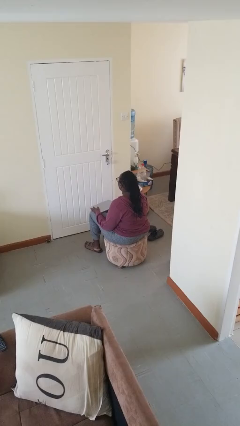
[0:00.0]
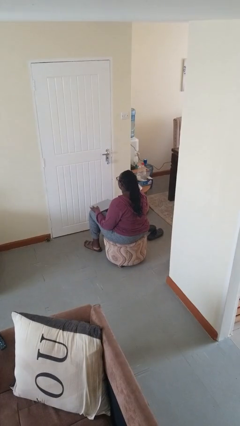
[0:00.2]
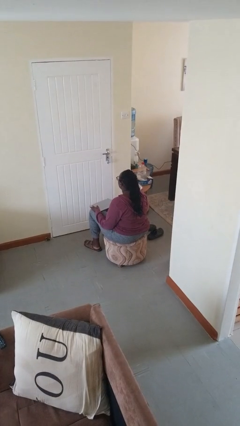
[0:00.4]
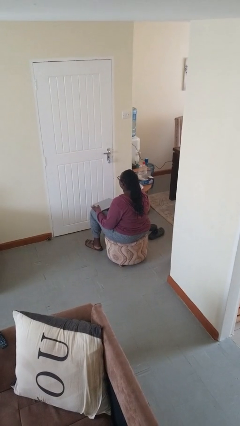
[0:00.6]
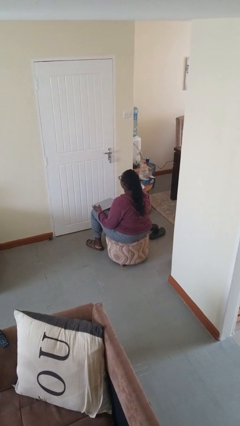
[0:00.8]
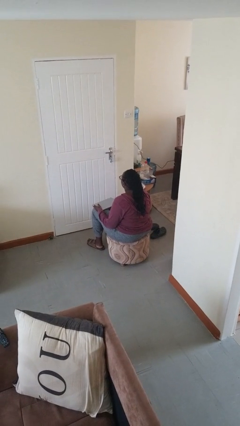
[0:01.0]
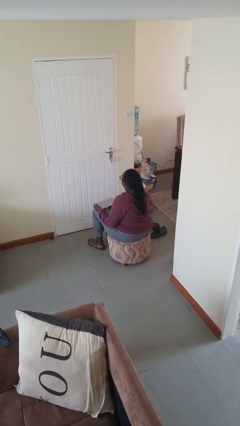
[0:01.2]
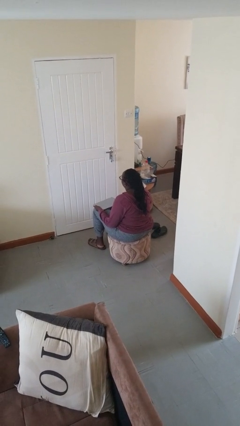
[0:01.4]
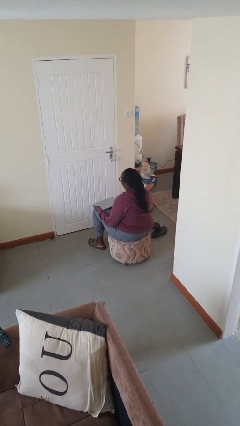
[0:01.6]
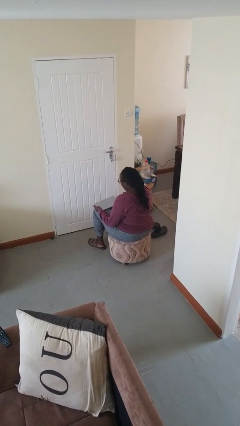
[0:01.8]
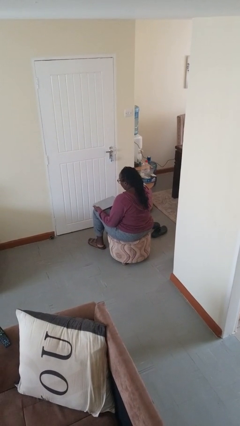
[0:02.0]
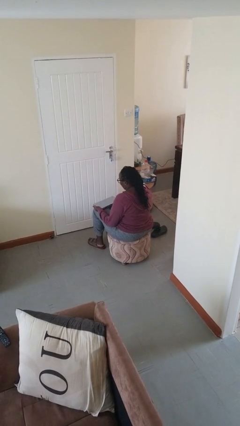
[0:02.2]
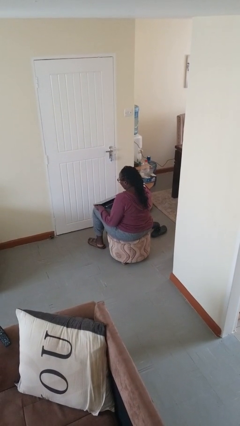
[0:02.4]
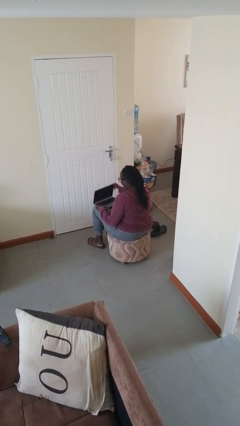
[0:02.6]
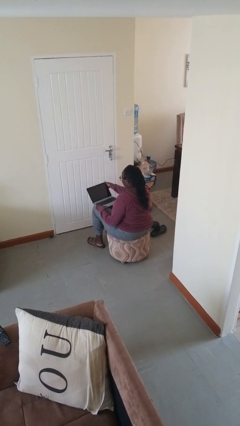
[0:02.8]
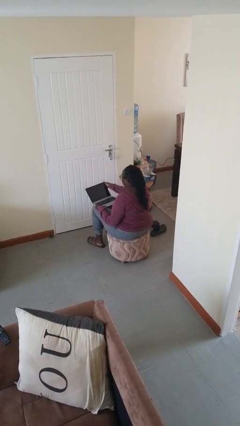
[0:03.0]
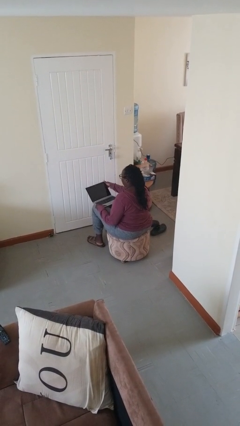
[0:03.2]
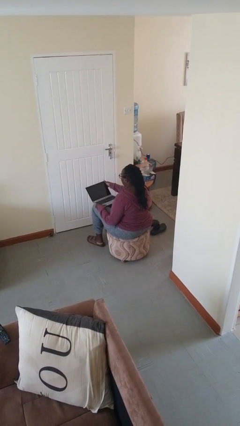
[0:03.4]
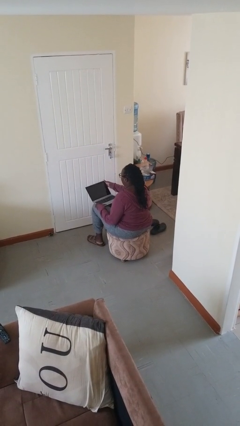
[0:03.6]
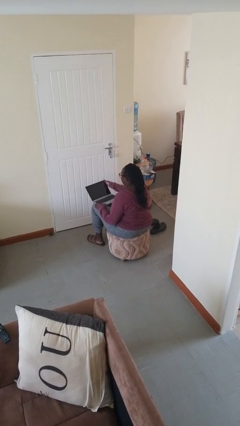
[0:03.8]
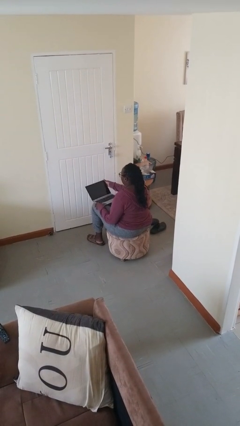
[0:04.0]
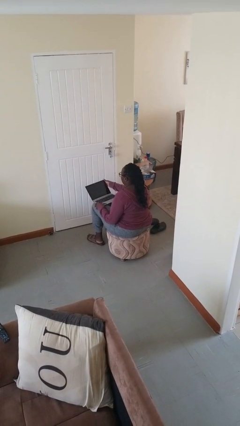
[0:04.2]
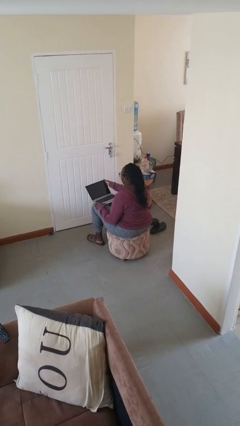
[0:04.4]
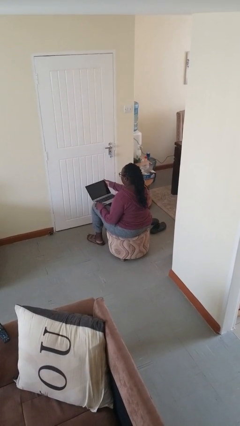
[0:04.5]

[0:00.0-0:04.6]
person opens laptop

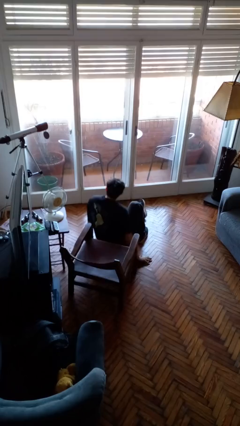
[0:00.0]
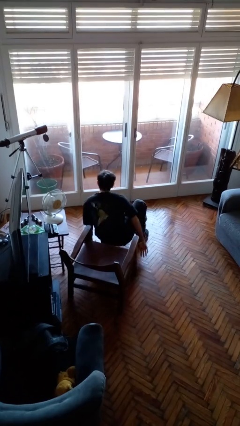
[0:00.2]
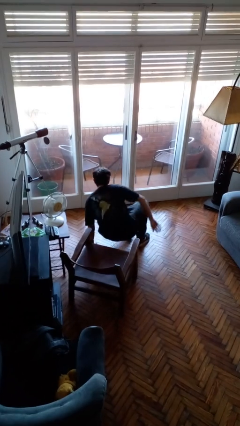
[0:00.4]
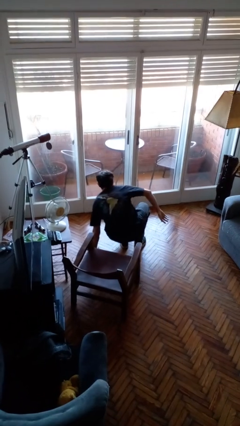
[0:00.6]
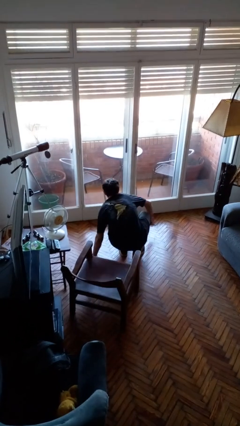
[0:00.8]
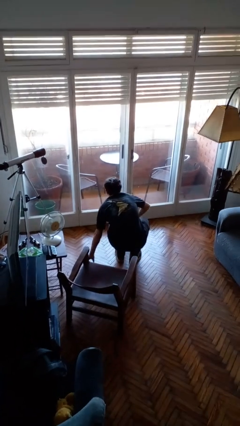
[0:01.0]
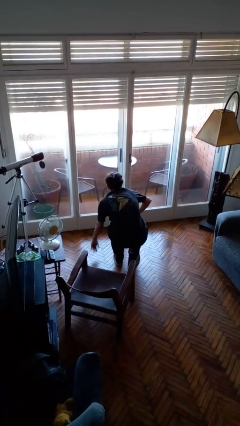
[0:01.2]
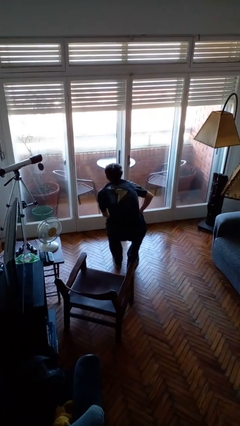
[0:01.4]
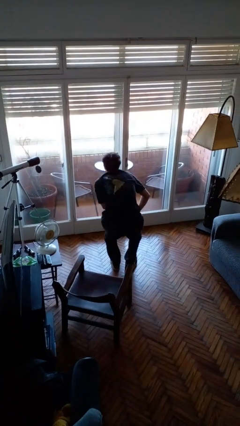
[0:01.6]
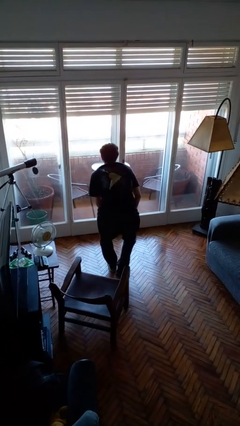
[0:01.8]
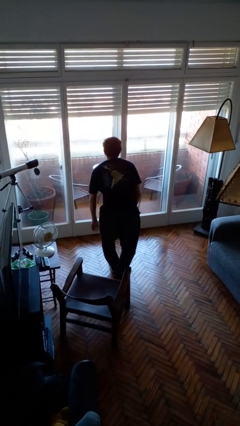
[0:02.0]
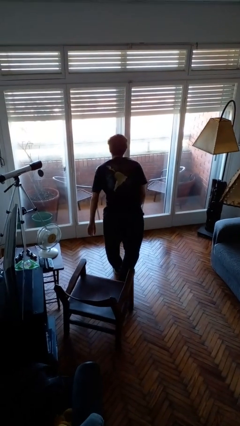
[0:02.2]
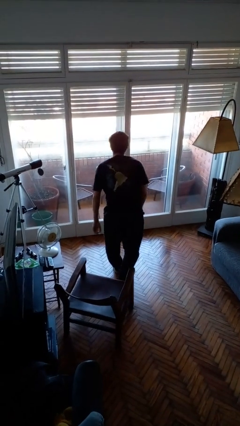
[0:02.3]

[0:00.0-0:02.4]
person stands up from floor

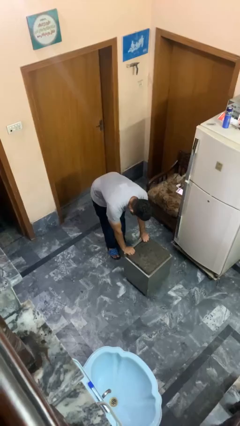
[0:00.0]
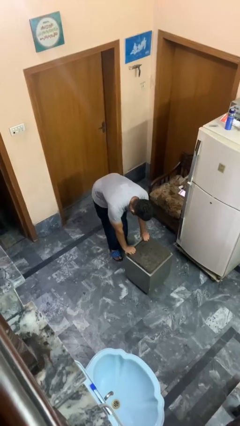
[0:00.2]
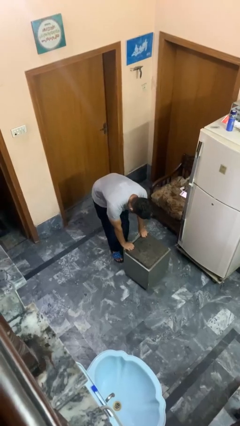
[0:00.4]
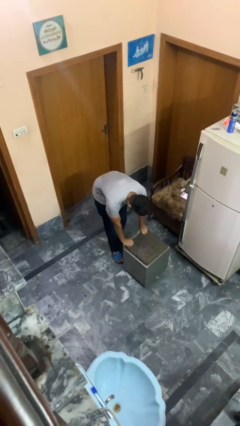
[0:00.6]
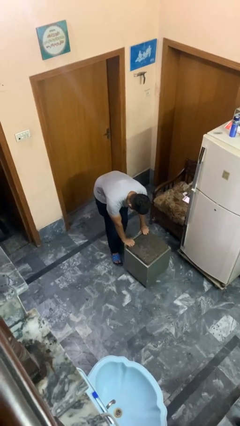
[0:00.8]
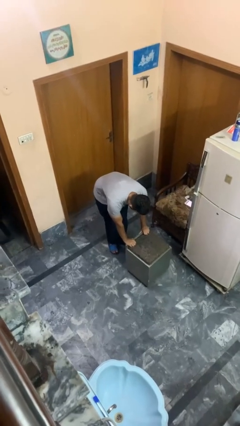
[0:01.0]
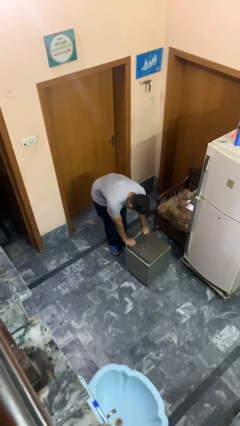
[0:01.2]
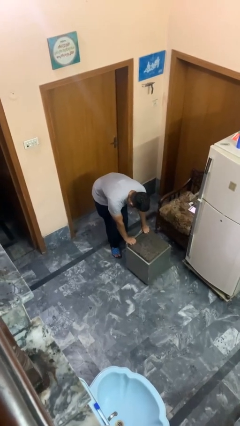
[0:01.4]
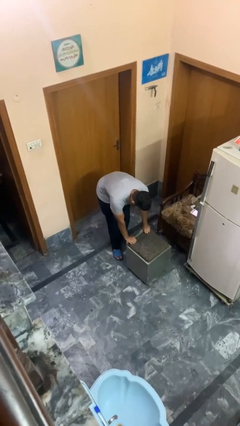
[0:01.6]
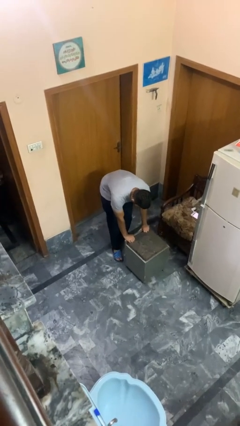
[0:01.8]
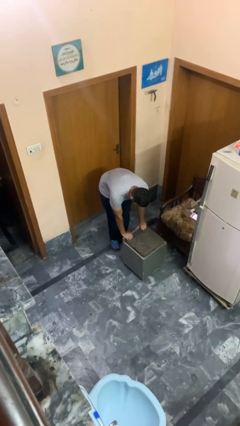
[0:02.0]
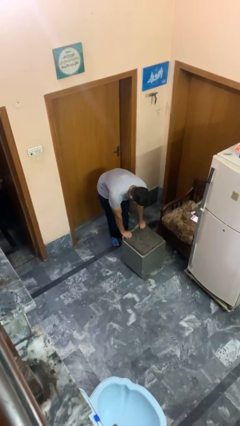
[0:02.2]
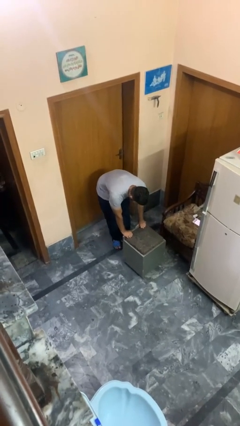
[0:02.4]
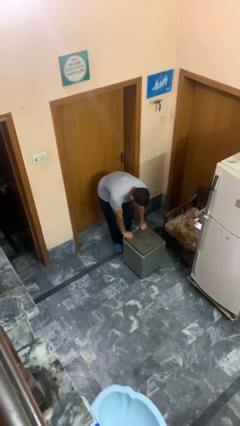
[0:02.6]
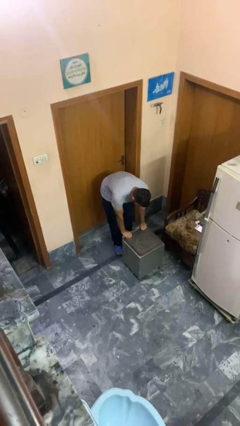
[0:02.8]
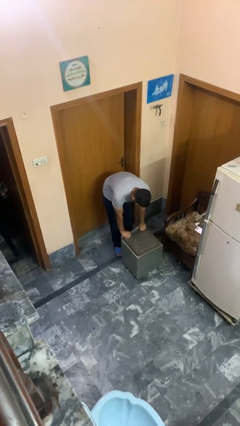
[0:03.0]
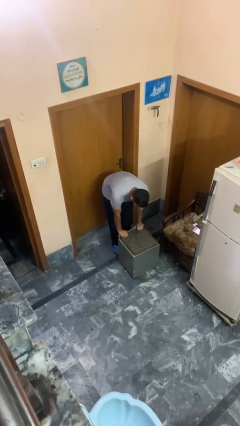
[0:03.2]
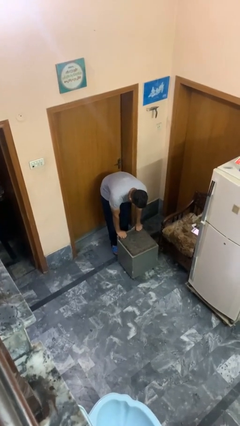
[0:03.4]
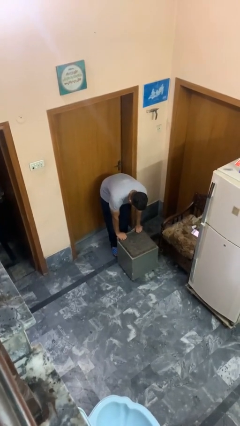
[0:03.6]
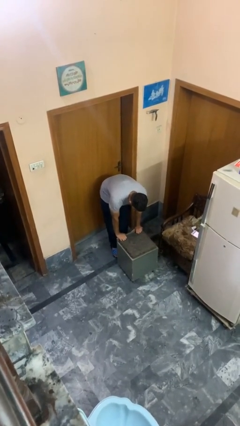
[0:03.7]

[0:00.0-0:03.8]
person pulls wheeled cart

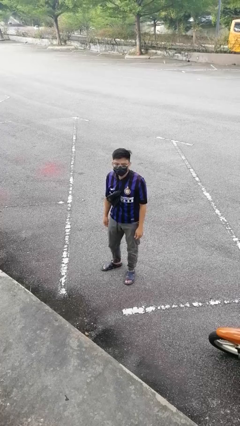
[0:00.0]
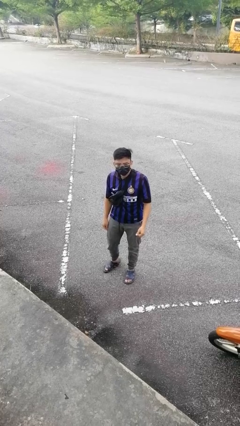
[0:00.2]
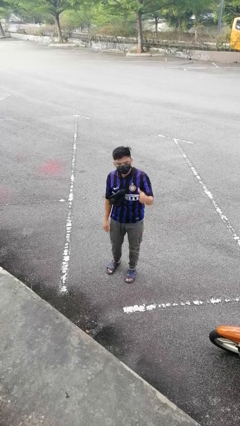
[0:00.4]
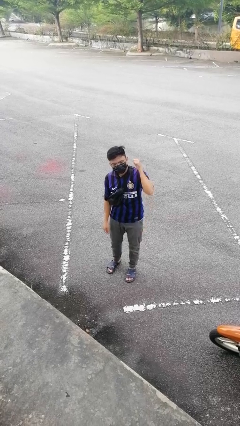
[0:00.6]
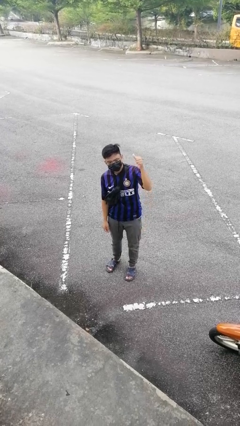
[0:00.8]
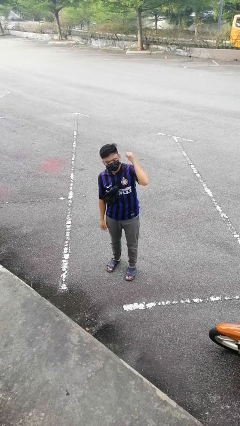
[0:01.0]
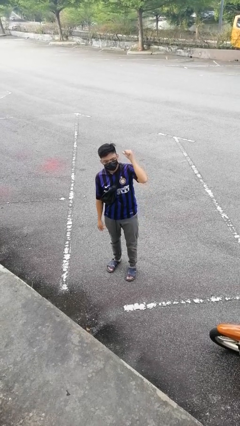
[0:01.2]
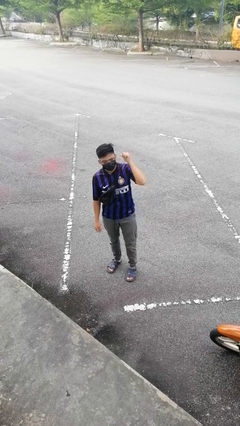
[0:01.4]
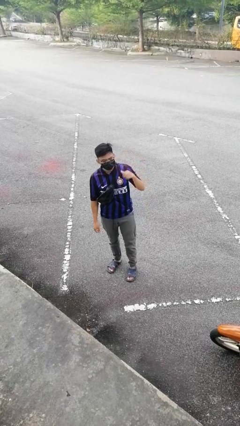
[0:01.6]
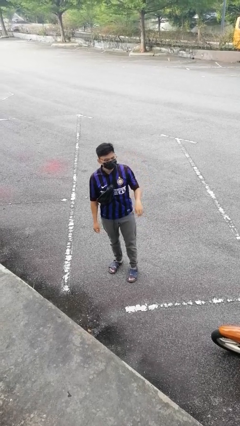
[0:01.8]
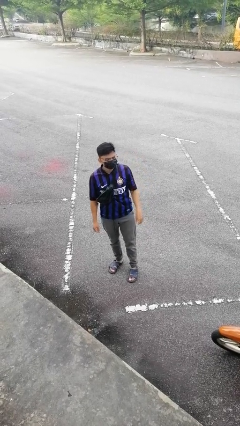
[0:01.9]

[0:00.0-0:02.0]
person gestures behind me

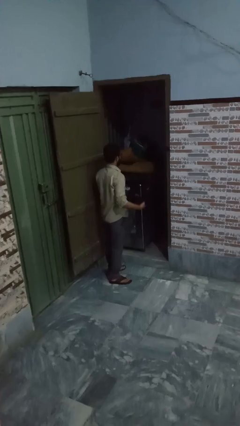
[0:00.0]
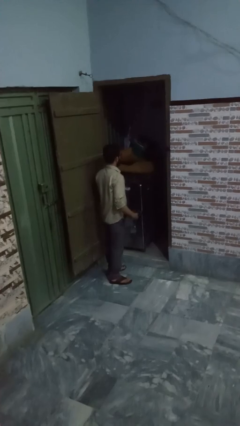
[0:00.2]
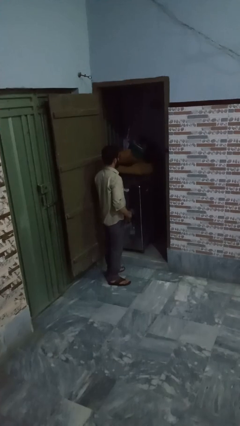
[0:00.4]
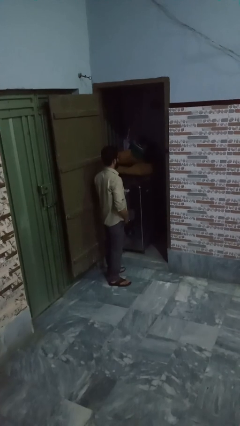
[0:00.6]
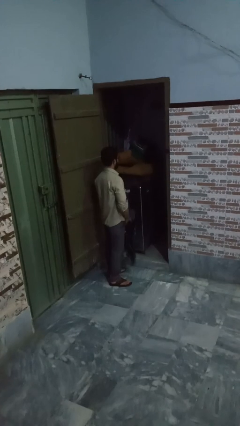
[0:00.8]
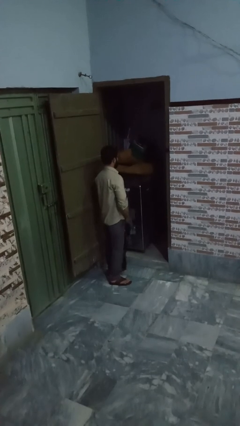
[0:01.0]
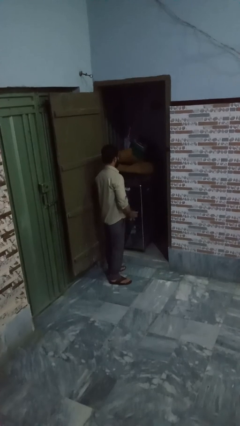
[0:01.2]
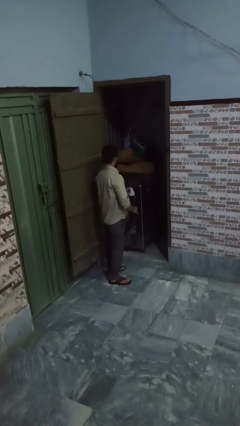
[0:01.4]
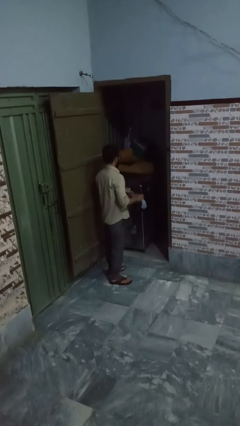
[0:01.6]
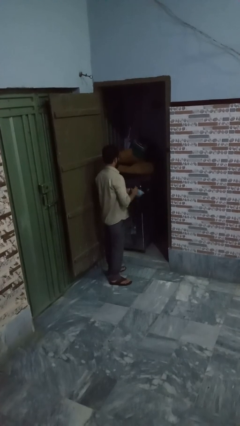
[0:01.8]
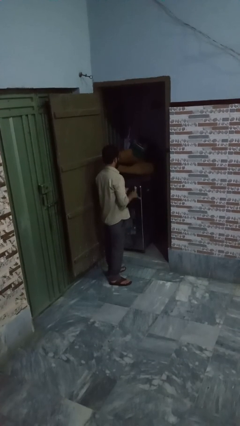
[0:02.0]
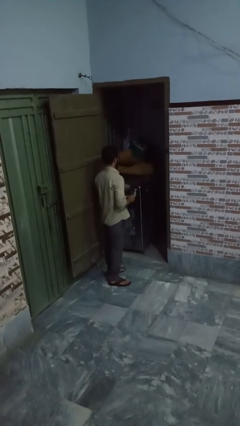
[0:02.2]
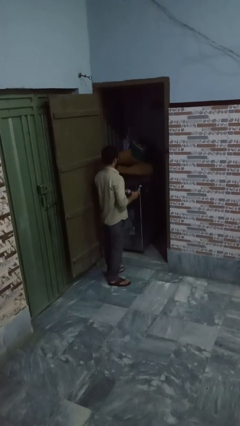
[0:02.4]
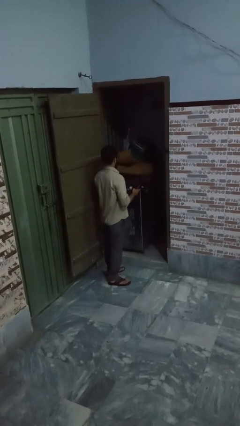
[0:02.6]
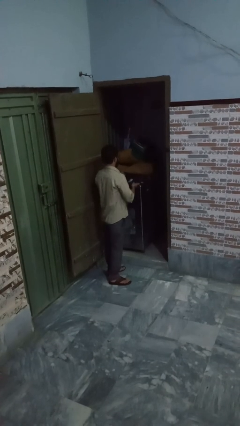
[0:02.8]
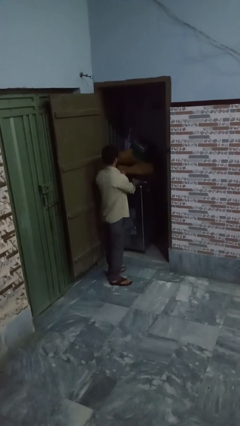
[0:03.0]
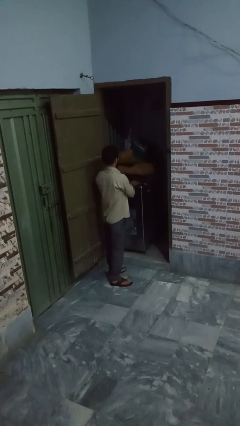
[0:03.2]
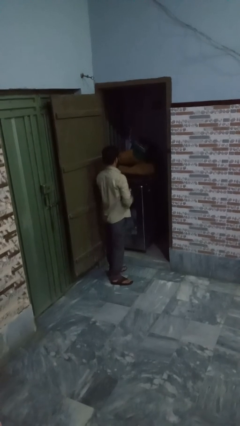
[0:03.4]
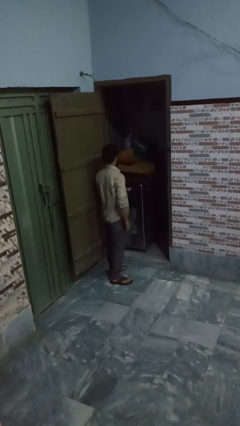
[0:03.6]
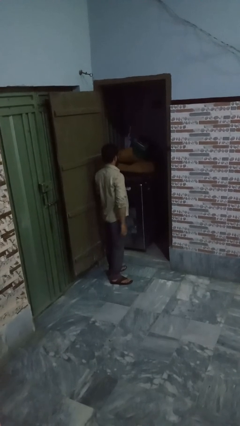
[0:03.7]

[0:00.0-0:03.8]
person loads dryer

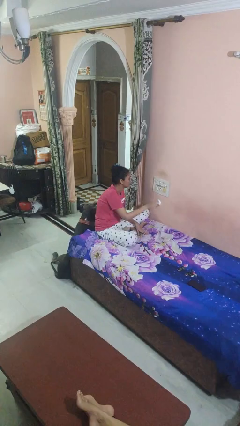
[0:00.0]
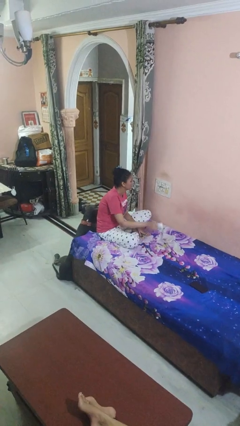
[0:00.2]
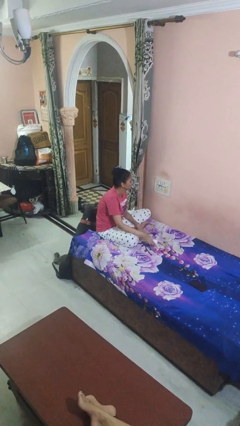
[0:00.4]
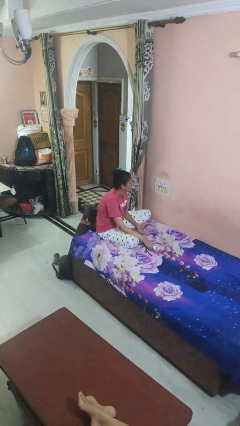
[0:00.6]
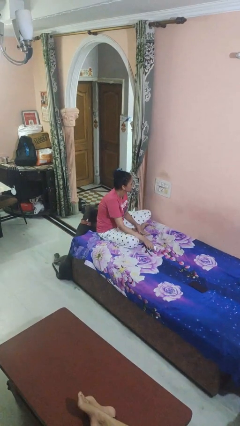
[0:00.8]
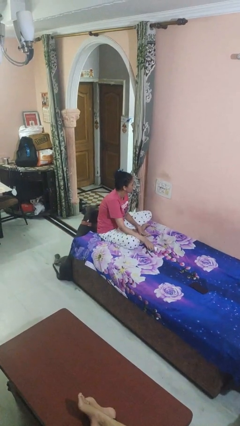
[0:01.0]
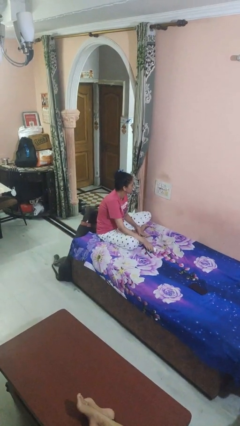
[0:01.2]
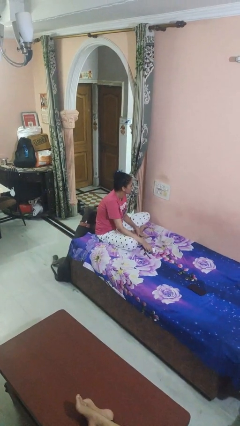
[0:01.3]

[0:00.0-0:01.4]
person unplugs from electrical socket
